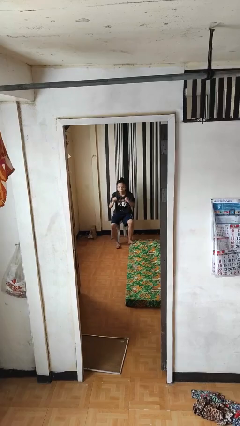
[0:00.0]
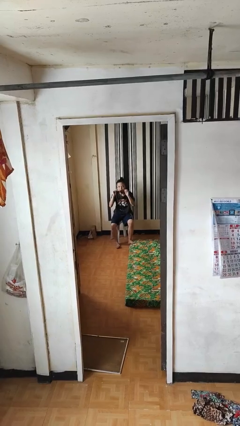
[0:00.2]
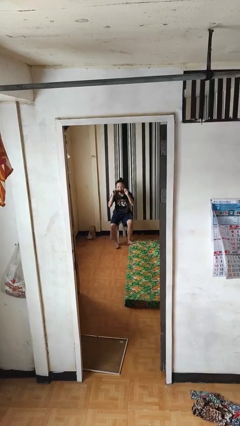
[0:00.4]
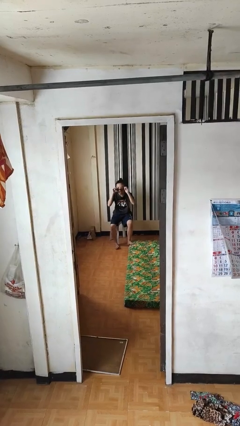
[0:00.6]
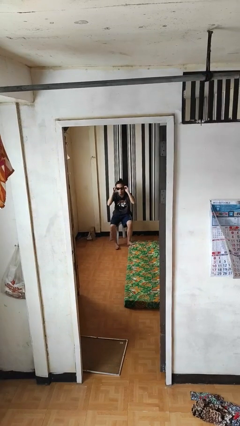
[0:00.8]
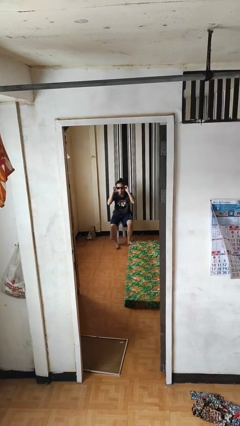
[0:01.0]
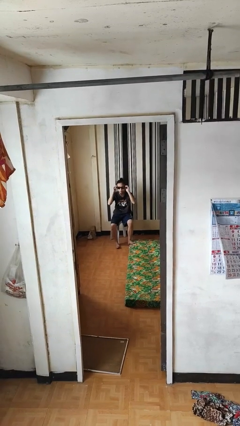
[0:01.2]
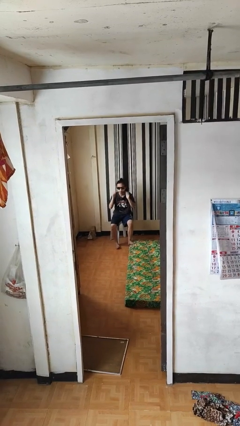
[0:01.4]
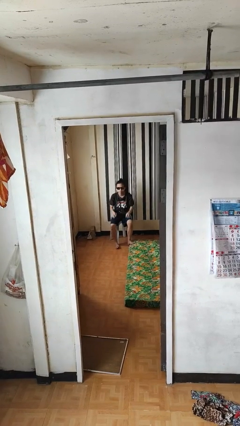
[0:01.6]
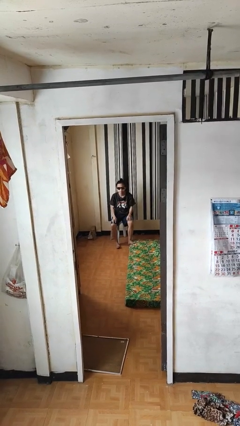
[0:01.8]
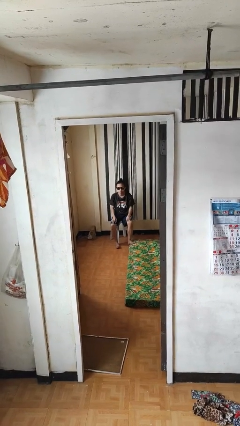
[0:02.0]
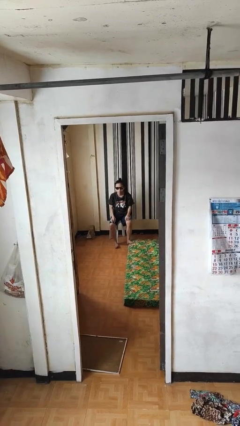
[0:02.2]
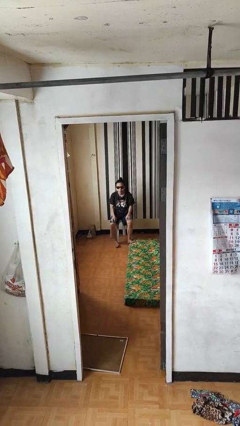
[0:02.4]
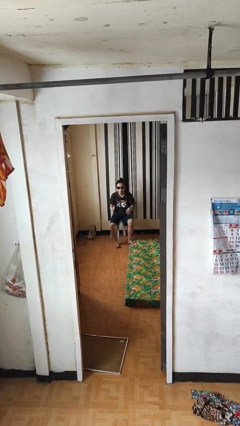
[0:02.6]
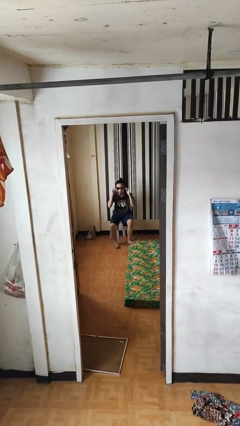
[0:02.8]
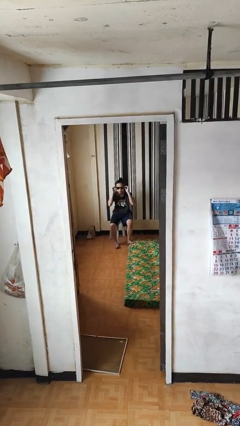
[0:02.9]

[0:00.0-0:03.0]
person puts on sunglasses

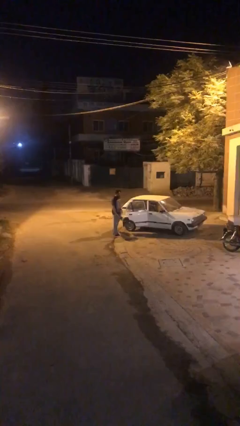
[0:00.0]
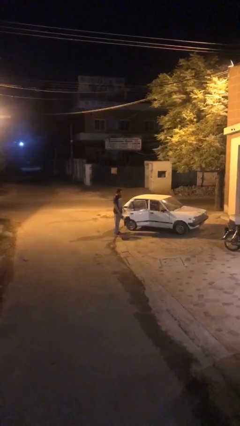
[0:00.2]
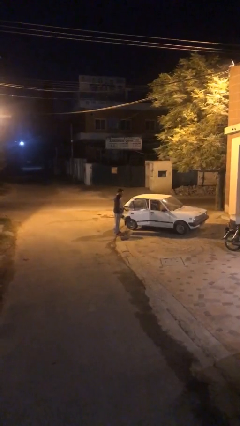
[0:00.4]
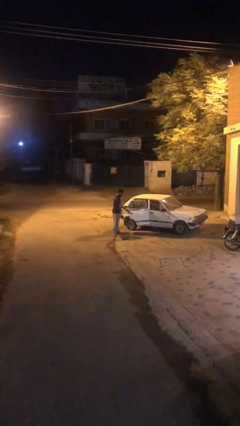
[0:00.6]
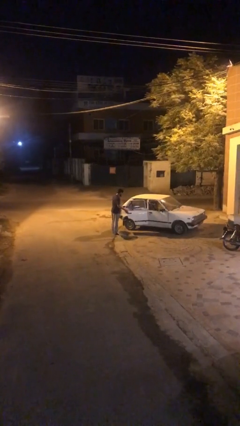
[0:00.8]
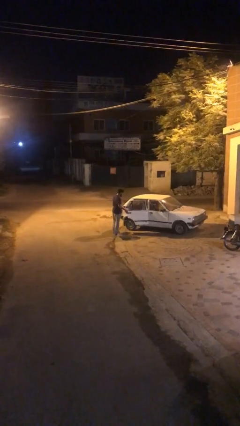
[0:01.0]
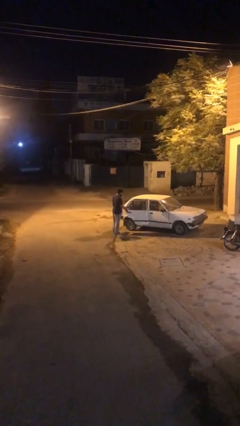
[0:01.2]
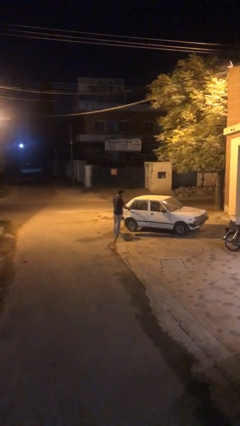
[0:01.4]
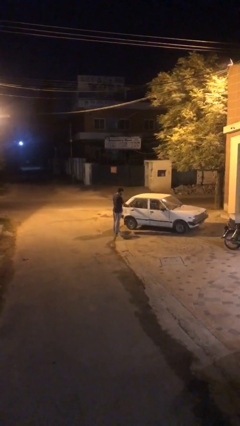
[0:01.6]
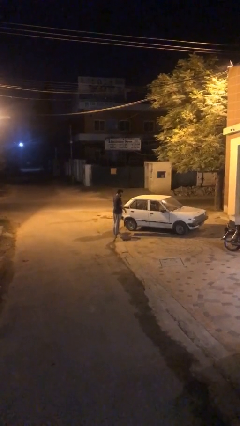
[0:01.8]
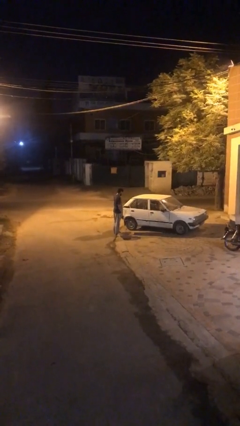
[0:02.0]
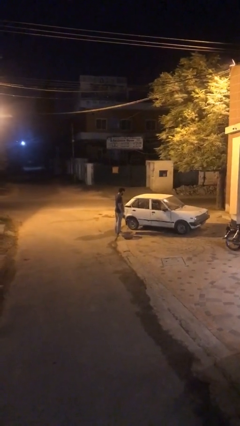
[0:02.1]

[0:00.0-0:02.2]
person closes car door

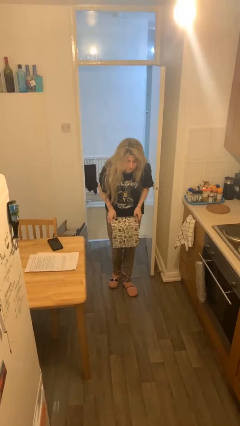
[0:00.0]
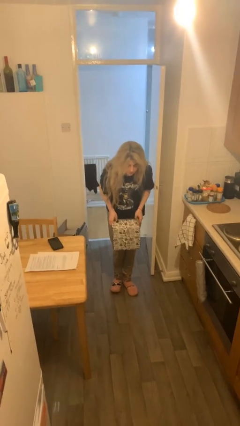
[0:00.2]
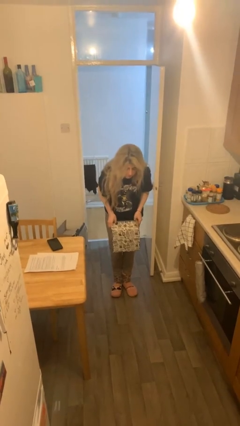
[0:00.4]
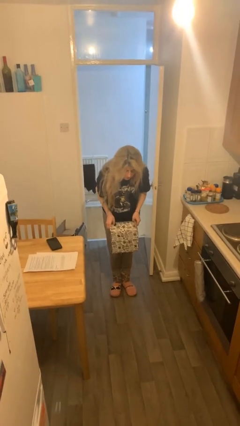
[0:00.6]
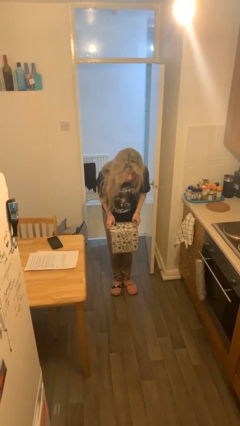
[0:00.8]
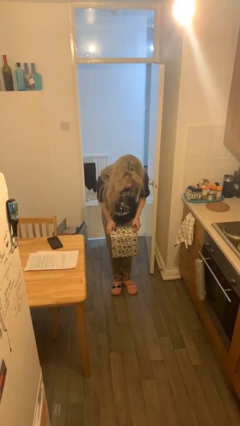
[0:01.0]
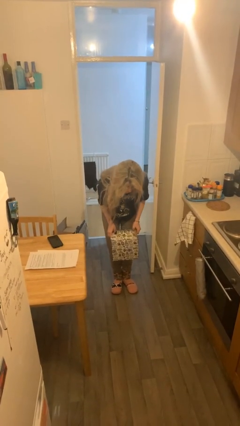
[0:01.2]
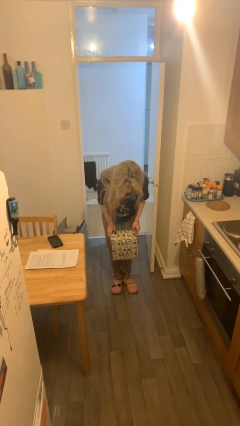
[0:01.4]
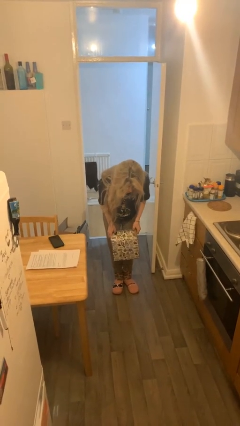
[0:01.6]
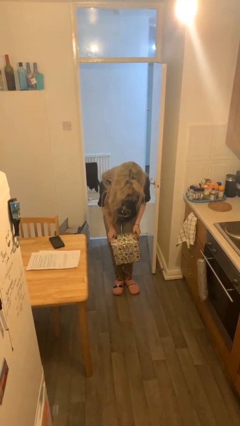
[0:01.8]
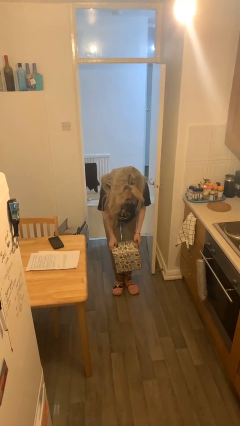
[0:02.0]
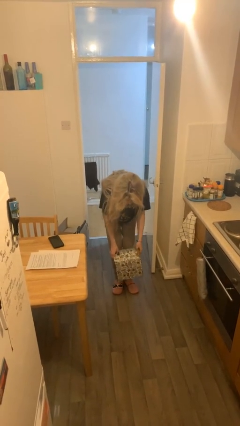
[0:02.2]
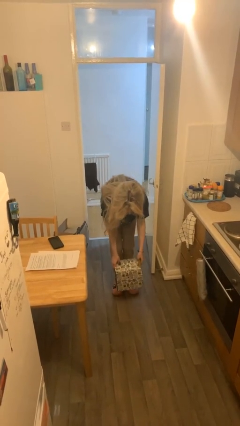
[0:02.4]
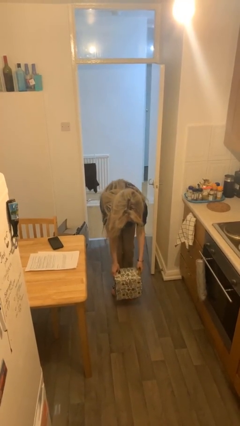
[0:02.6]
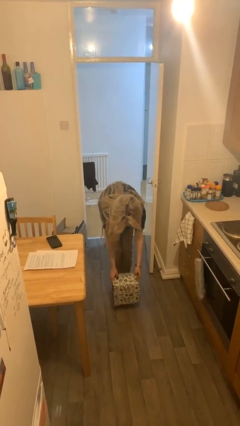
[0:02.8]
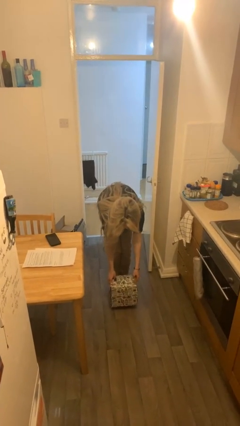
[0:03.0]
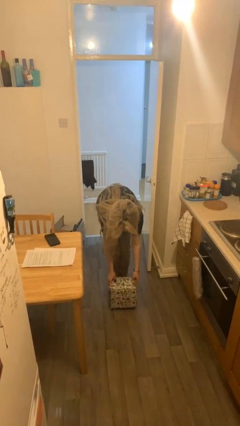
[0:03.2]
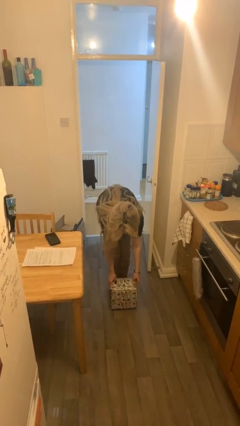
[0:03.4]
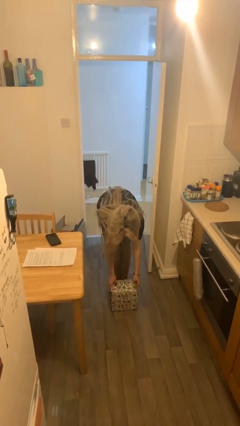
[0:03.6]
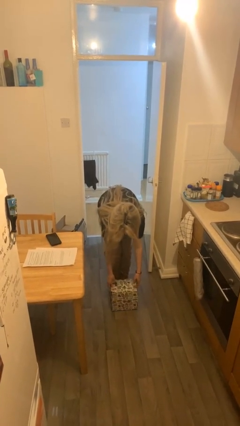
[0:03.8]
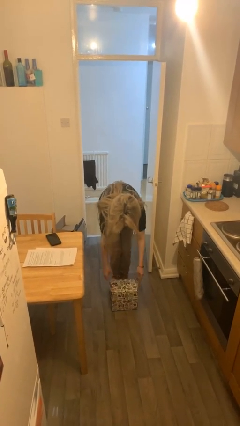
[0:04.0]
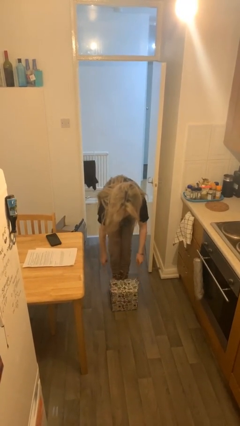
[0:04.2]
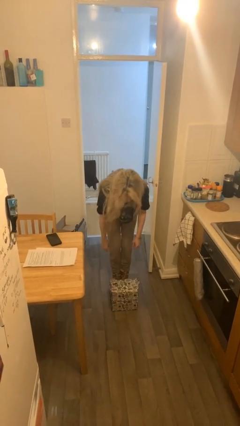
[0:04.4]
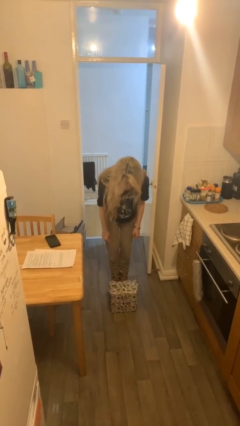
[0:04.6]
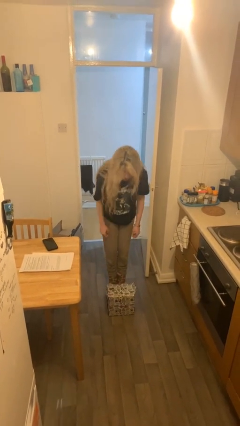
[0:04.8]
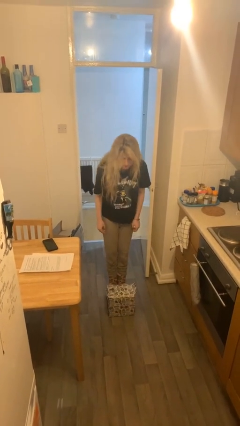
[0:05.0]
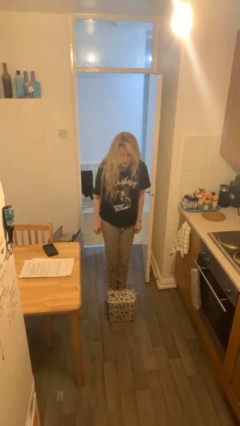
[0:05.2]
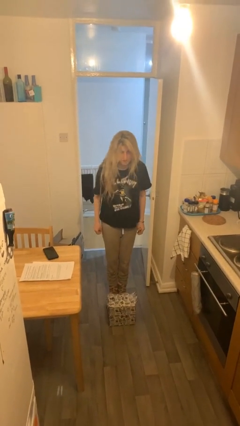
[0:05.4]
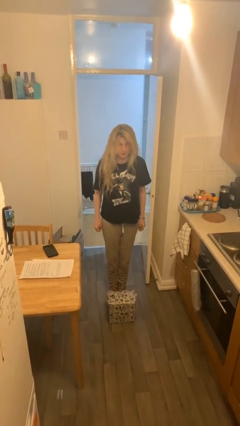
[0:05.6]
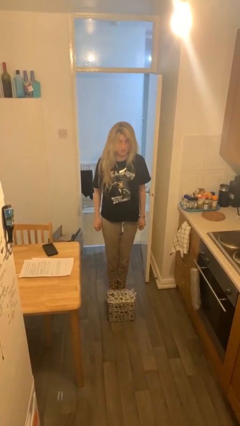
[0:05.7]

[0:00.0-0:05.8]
person puts down object on floor

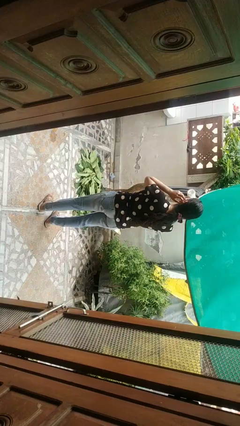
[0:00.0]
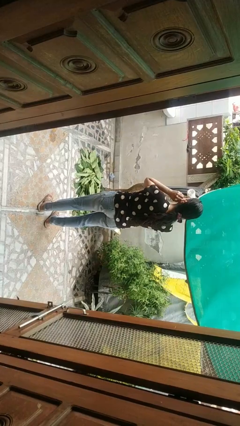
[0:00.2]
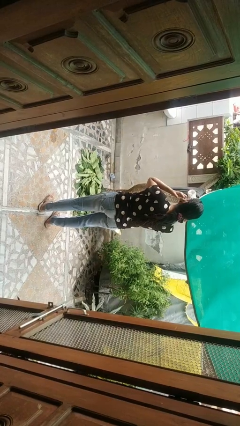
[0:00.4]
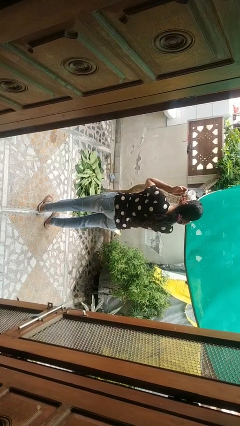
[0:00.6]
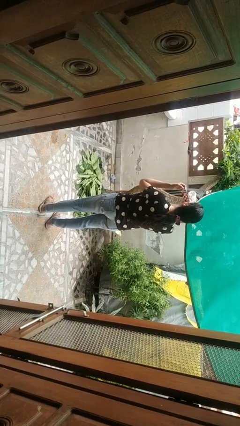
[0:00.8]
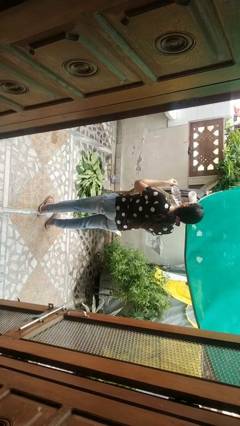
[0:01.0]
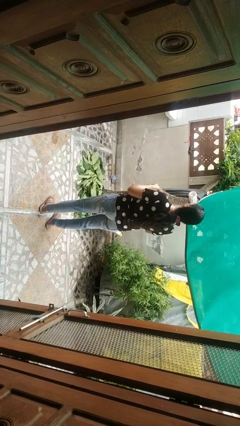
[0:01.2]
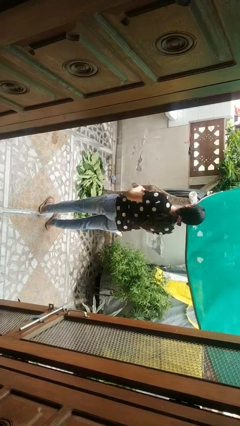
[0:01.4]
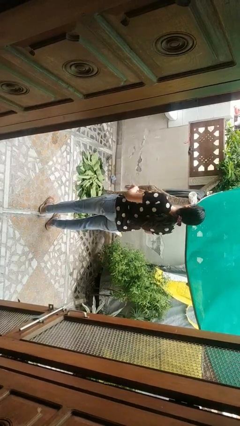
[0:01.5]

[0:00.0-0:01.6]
person takes off facemask

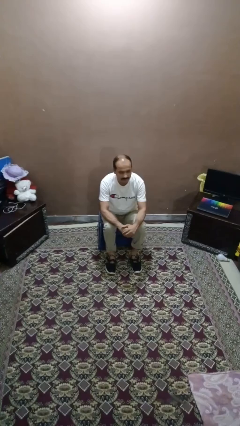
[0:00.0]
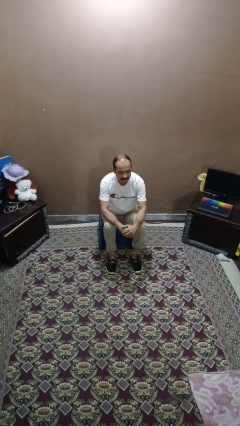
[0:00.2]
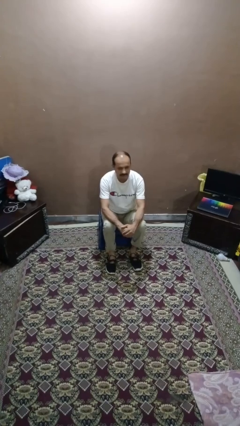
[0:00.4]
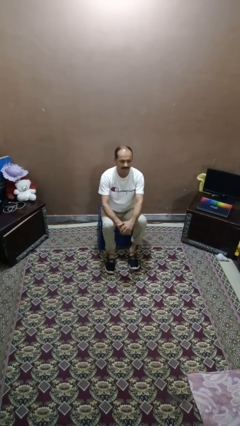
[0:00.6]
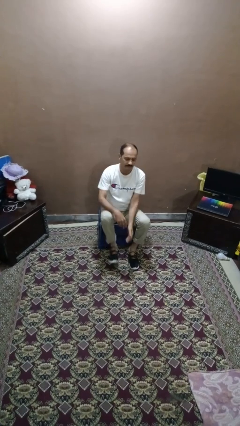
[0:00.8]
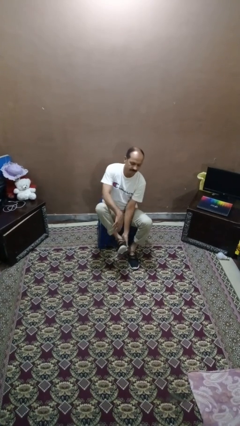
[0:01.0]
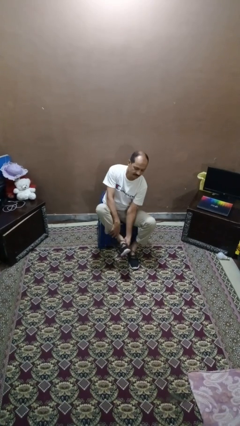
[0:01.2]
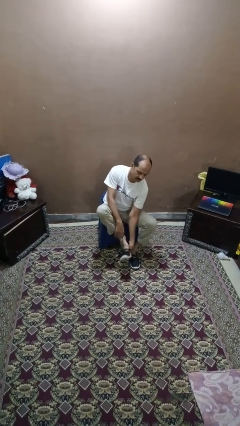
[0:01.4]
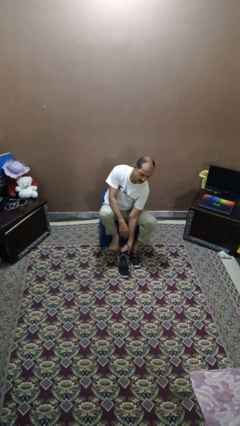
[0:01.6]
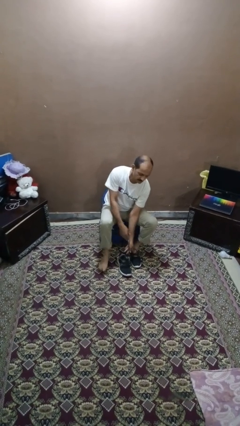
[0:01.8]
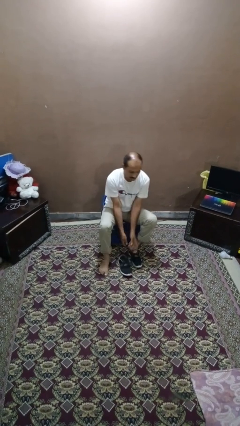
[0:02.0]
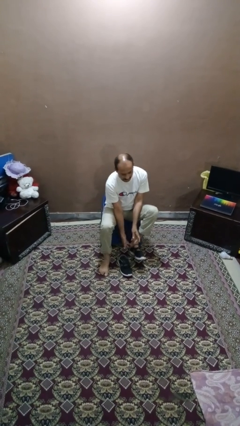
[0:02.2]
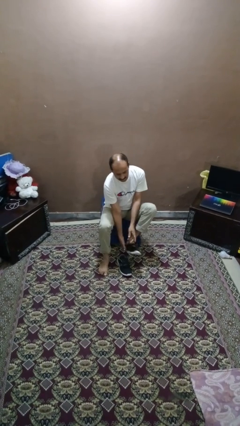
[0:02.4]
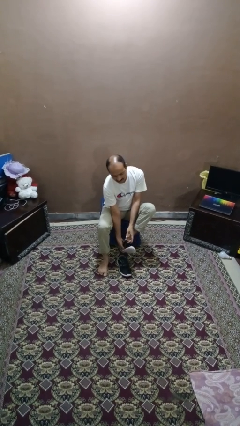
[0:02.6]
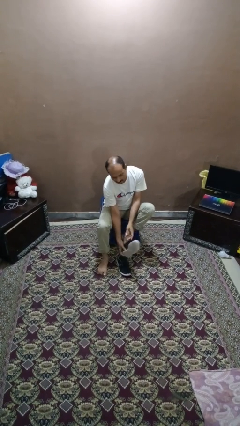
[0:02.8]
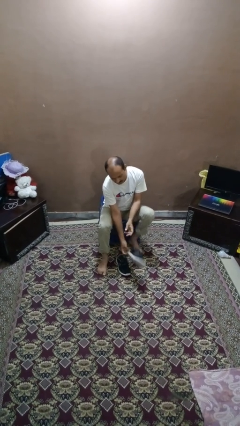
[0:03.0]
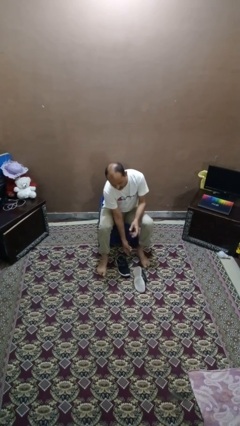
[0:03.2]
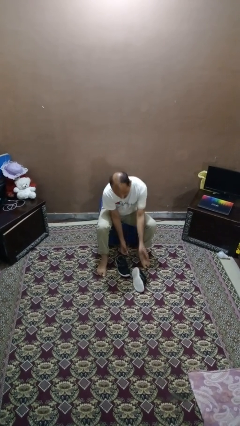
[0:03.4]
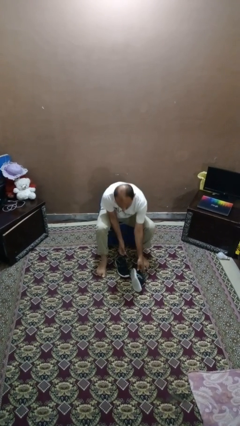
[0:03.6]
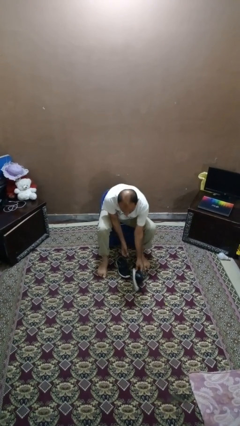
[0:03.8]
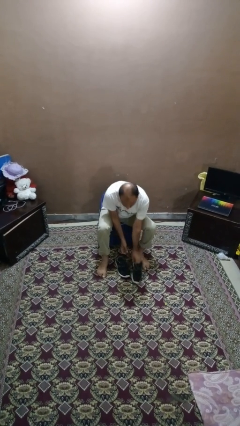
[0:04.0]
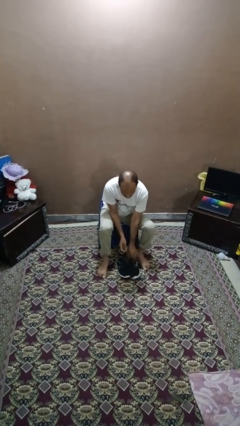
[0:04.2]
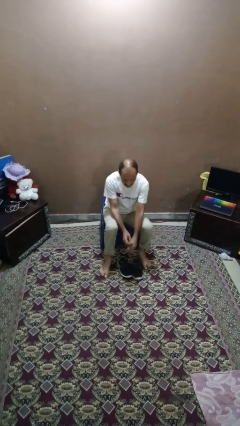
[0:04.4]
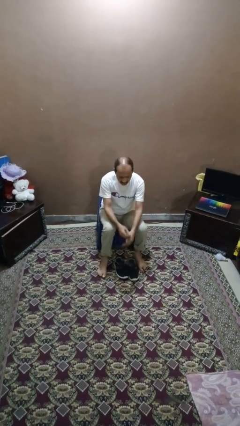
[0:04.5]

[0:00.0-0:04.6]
person takes off shoes
